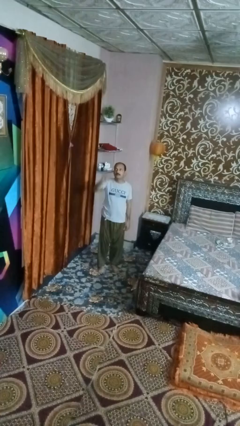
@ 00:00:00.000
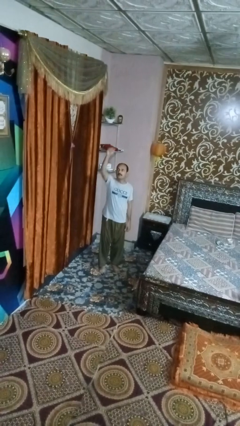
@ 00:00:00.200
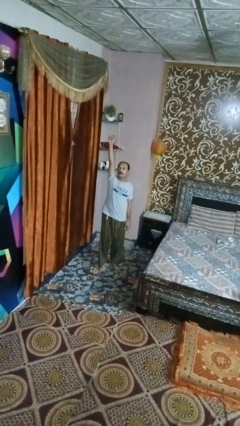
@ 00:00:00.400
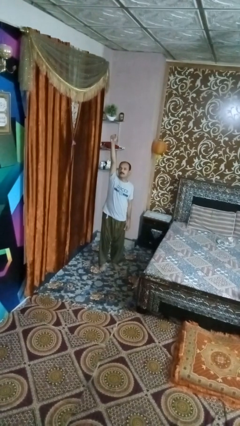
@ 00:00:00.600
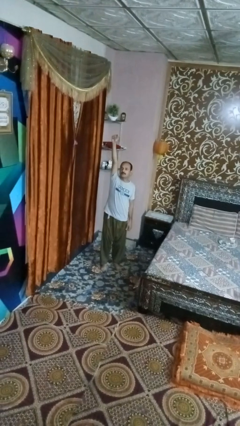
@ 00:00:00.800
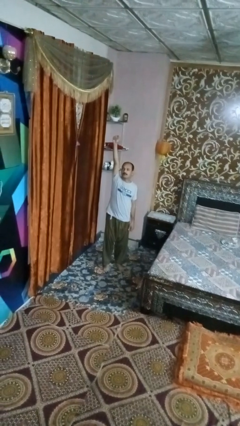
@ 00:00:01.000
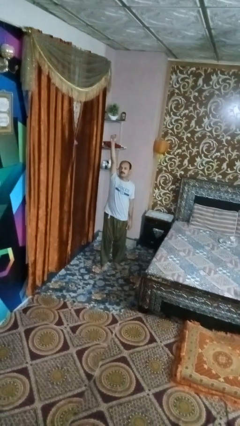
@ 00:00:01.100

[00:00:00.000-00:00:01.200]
person punches

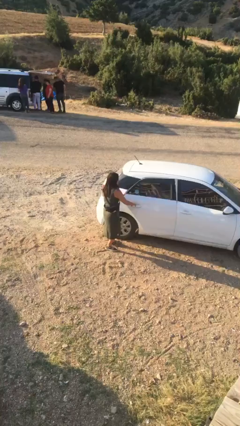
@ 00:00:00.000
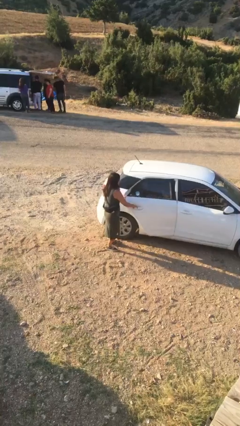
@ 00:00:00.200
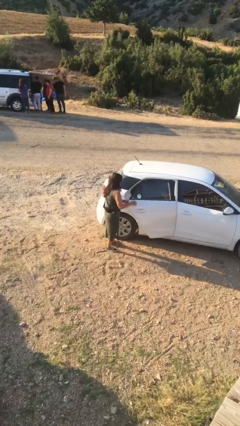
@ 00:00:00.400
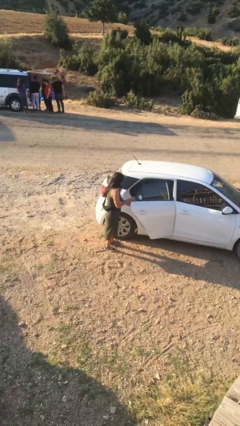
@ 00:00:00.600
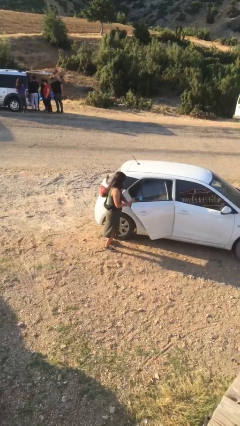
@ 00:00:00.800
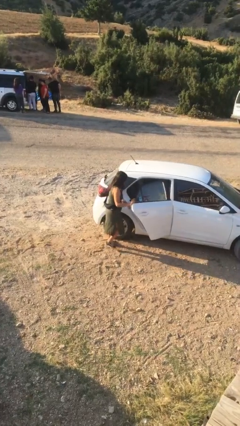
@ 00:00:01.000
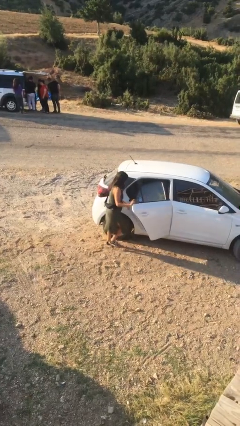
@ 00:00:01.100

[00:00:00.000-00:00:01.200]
person opens car door

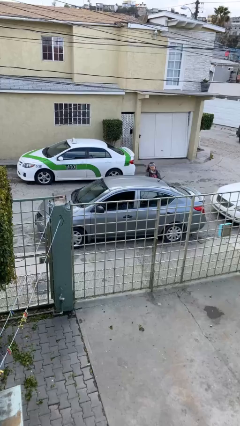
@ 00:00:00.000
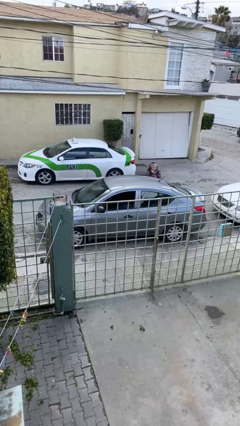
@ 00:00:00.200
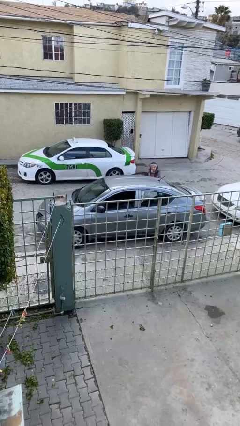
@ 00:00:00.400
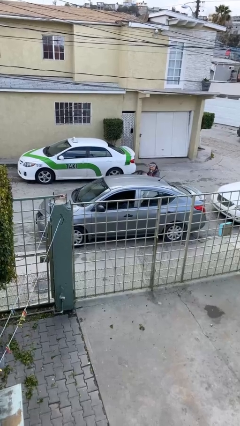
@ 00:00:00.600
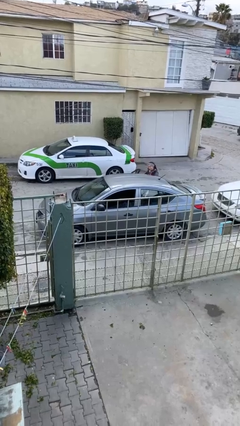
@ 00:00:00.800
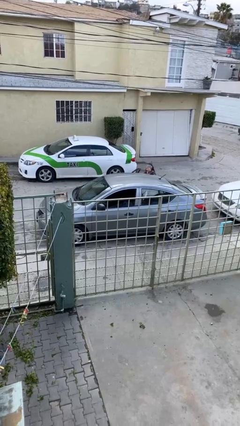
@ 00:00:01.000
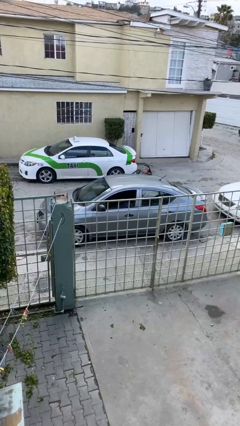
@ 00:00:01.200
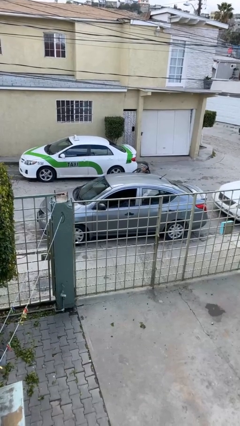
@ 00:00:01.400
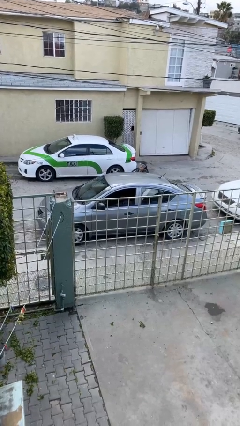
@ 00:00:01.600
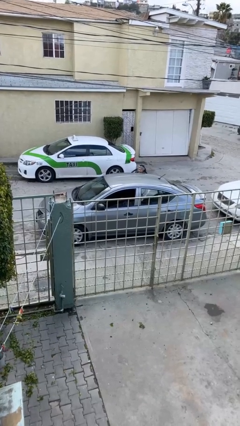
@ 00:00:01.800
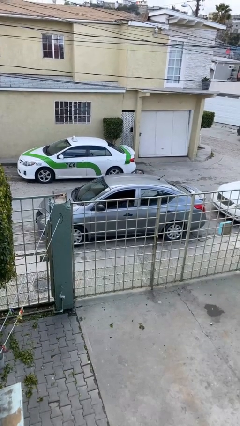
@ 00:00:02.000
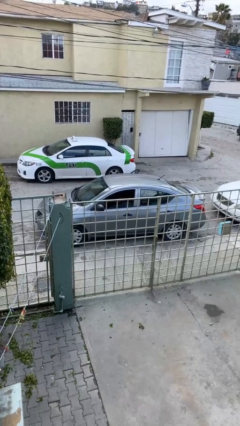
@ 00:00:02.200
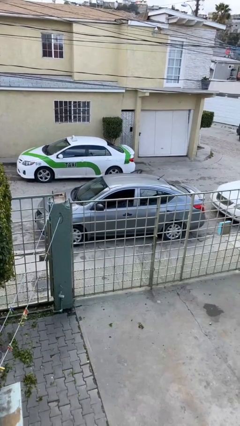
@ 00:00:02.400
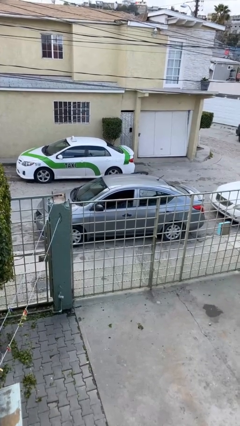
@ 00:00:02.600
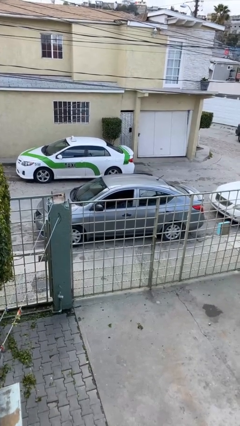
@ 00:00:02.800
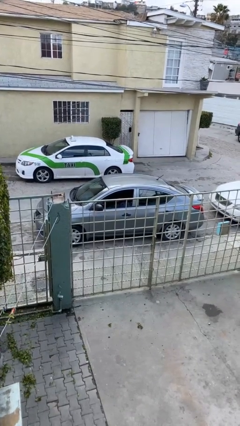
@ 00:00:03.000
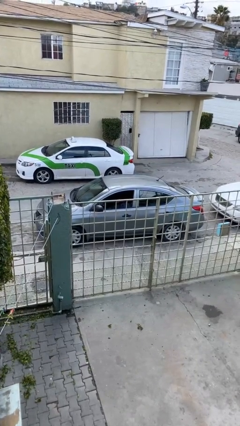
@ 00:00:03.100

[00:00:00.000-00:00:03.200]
car picks up person

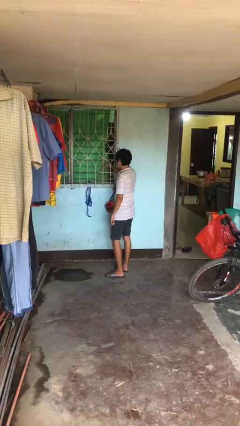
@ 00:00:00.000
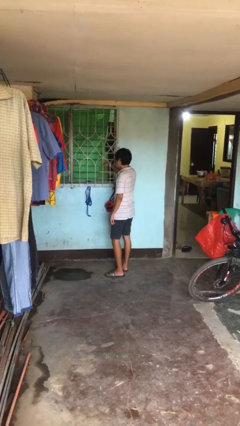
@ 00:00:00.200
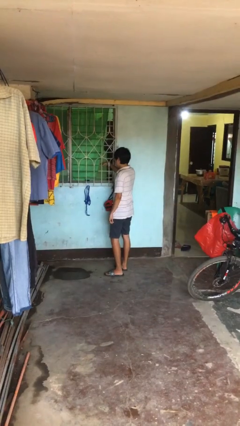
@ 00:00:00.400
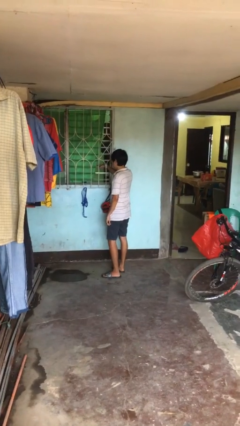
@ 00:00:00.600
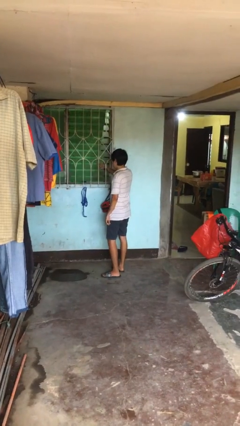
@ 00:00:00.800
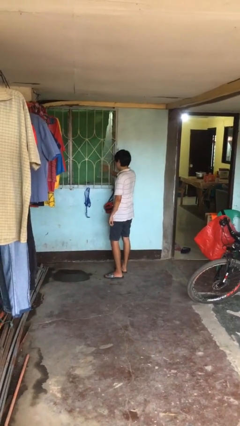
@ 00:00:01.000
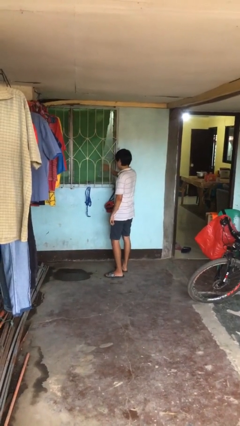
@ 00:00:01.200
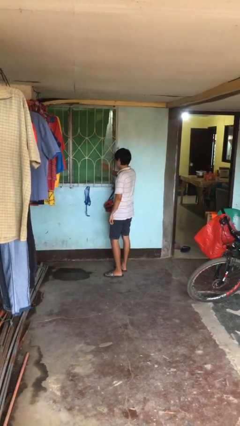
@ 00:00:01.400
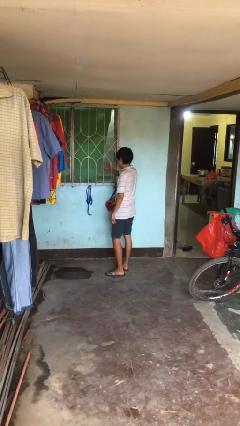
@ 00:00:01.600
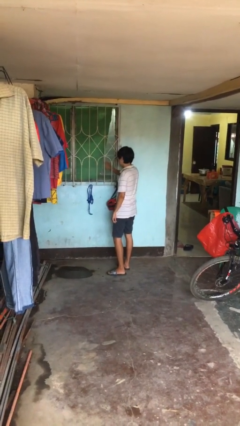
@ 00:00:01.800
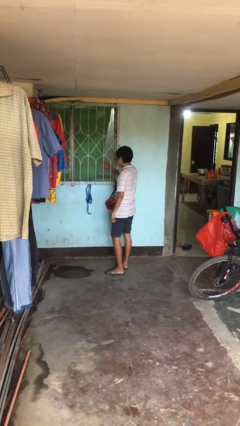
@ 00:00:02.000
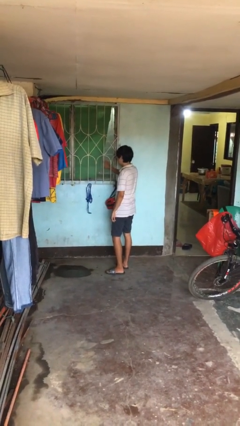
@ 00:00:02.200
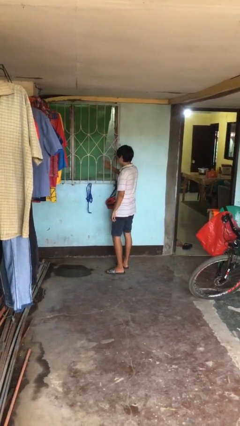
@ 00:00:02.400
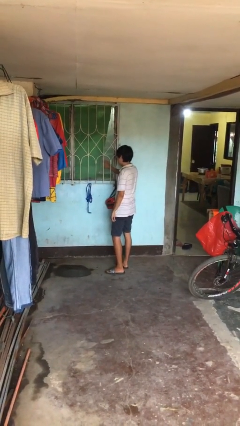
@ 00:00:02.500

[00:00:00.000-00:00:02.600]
person closes home window

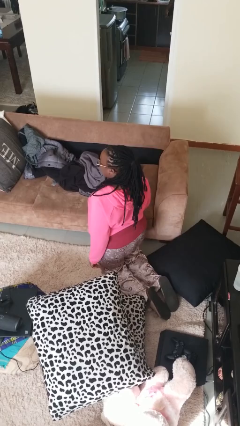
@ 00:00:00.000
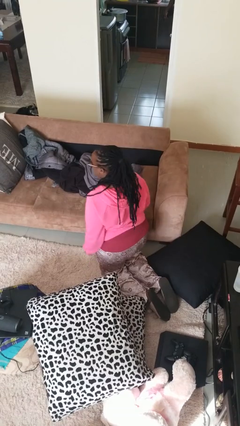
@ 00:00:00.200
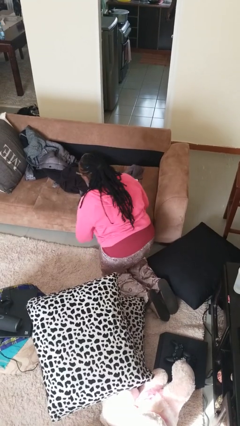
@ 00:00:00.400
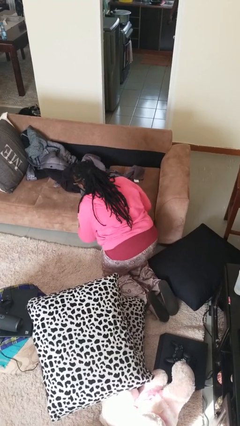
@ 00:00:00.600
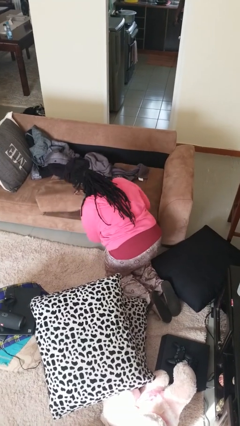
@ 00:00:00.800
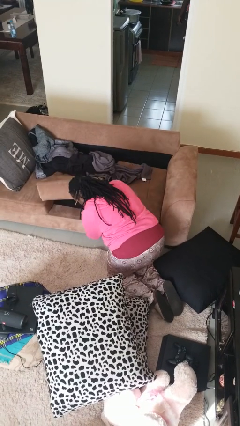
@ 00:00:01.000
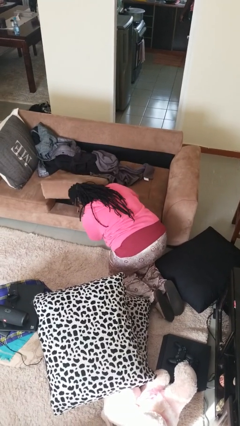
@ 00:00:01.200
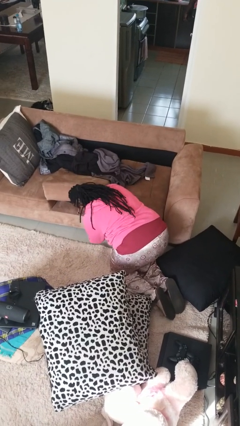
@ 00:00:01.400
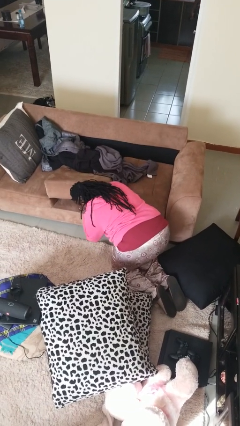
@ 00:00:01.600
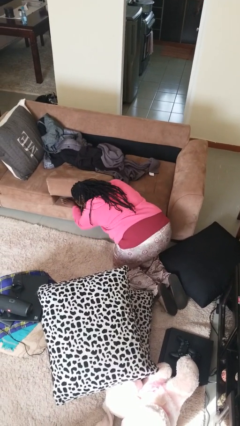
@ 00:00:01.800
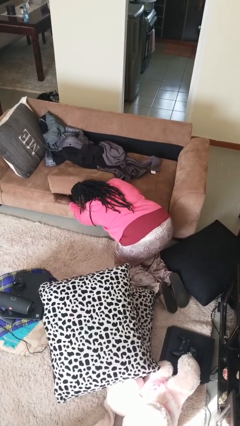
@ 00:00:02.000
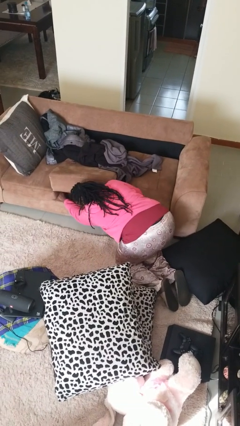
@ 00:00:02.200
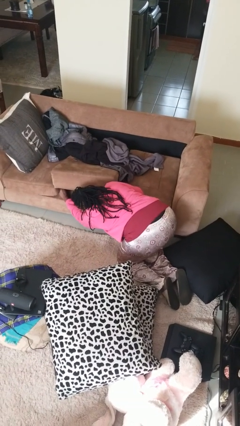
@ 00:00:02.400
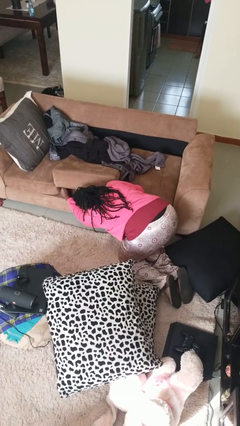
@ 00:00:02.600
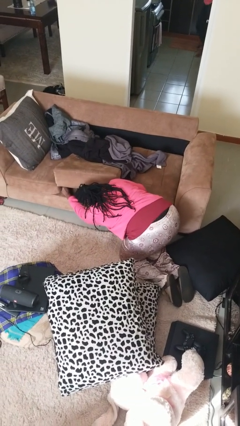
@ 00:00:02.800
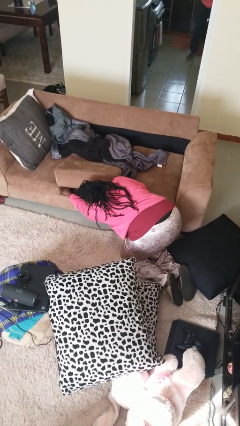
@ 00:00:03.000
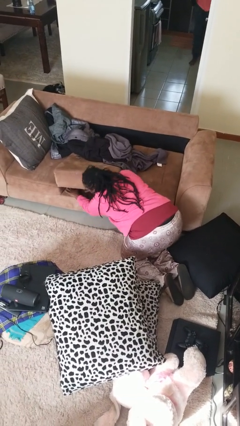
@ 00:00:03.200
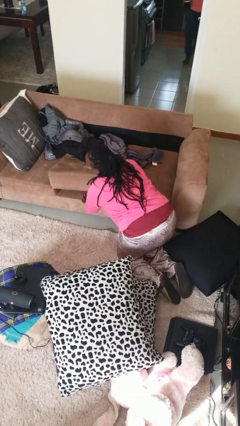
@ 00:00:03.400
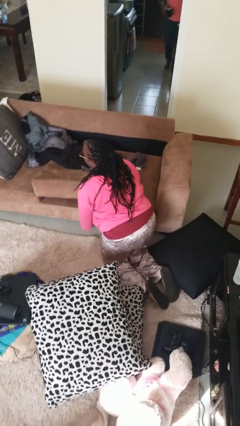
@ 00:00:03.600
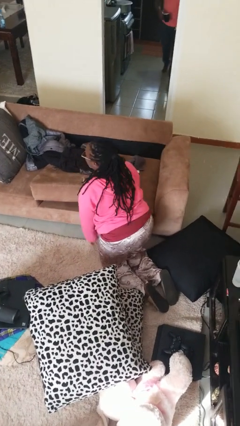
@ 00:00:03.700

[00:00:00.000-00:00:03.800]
person searches under couch

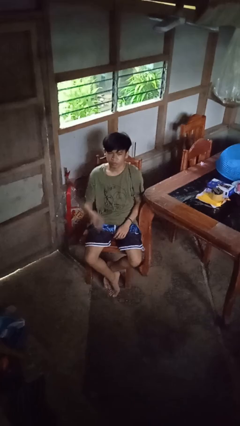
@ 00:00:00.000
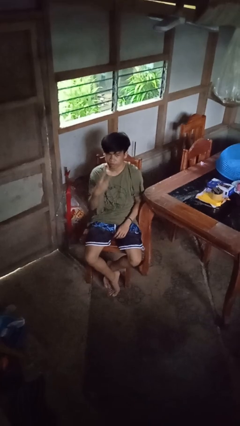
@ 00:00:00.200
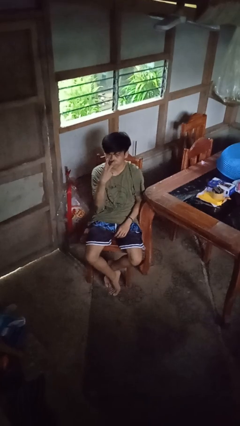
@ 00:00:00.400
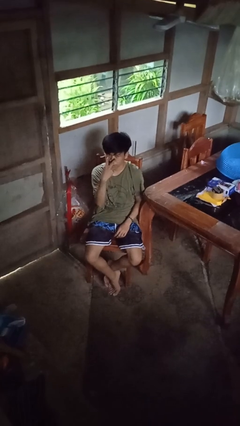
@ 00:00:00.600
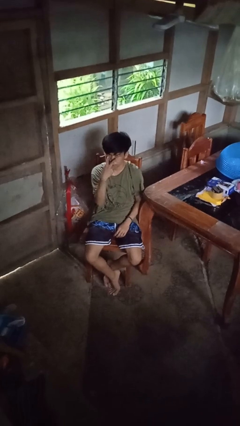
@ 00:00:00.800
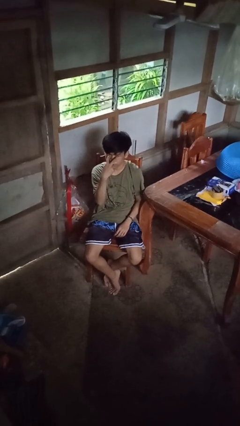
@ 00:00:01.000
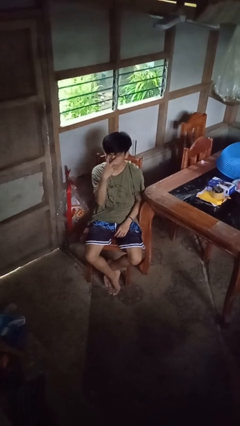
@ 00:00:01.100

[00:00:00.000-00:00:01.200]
person gestures watch closely

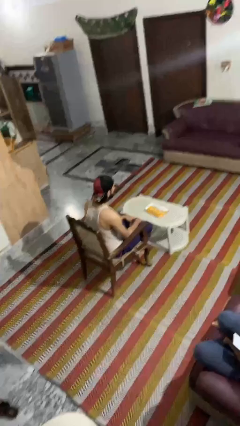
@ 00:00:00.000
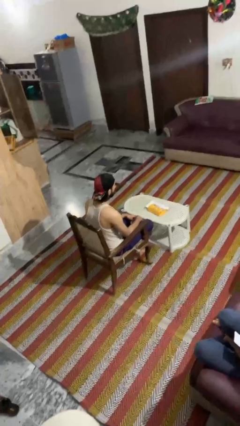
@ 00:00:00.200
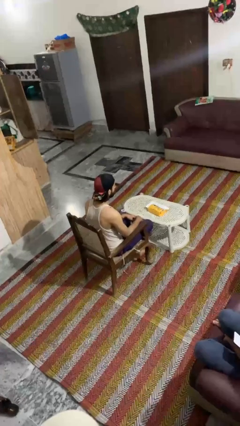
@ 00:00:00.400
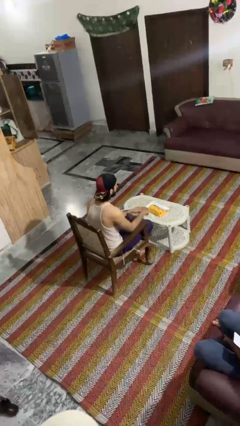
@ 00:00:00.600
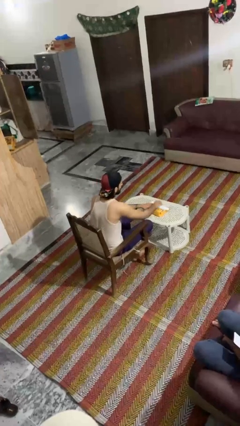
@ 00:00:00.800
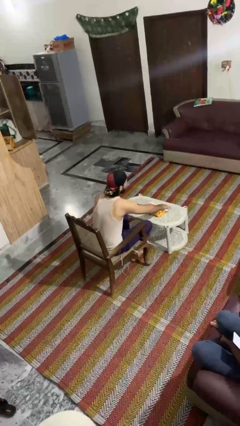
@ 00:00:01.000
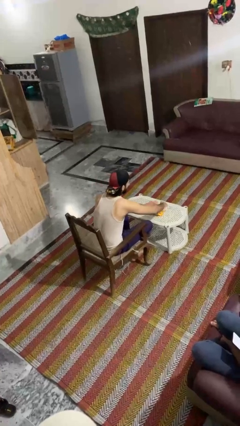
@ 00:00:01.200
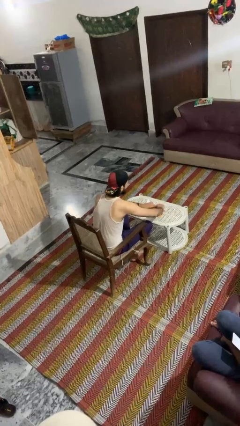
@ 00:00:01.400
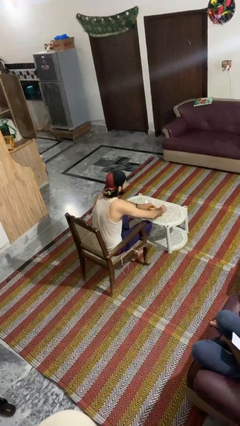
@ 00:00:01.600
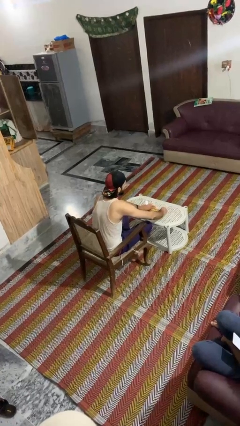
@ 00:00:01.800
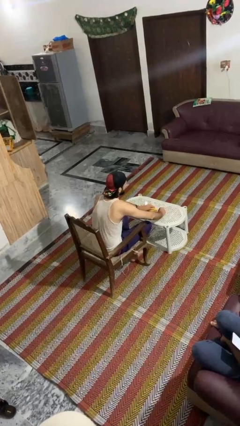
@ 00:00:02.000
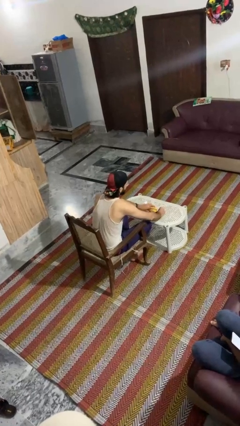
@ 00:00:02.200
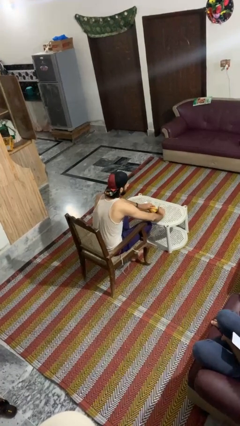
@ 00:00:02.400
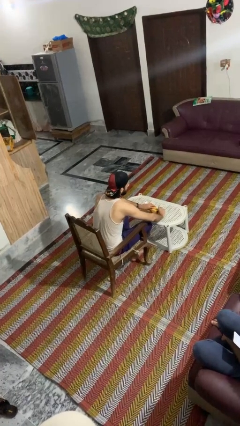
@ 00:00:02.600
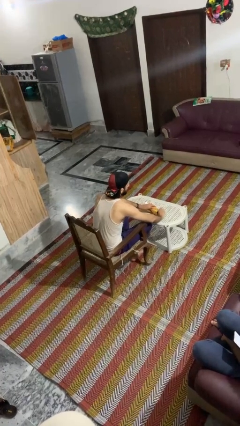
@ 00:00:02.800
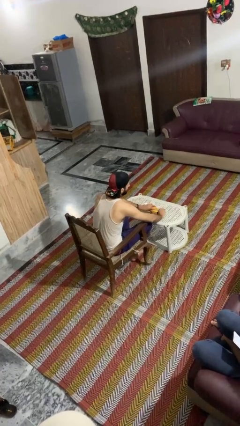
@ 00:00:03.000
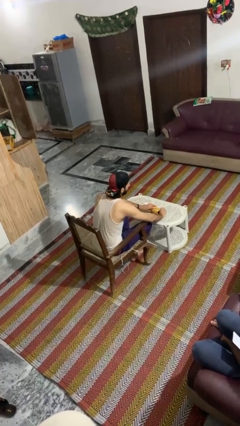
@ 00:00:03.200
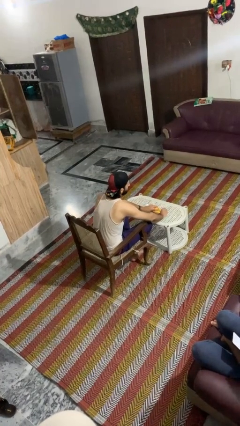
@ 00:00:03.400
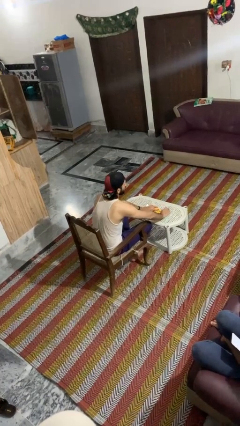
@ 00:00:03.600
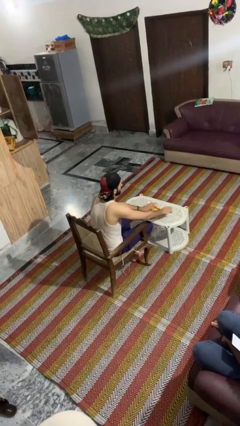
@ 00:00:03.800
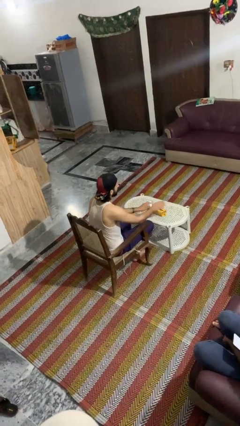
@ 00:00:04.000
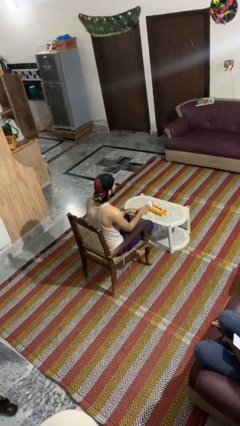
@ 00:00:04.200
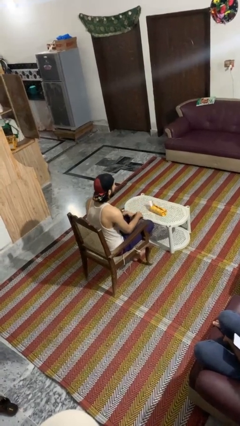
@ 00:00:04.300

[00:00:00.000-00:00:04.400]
person wraps box
